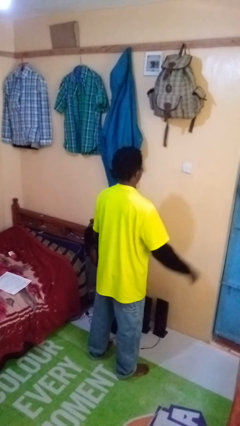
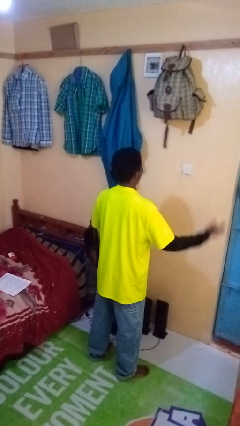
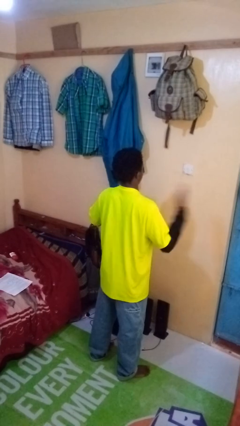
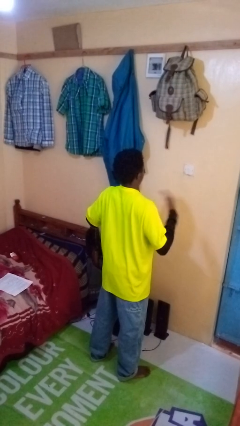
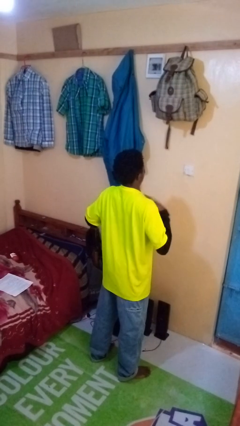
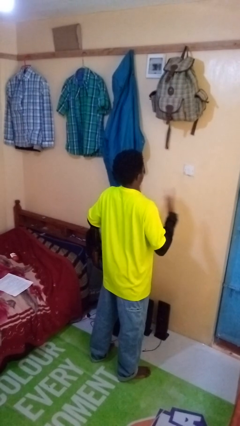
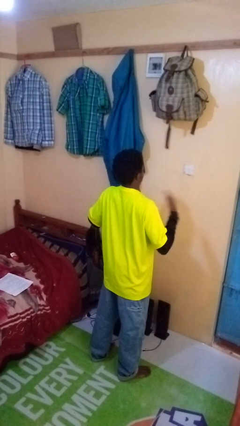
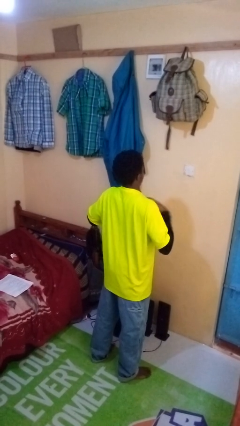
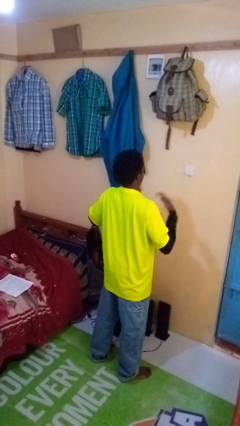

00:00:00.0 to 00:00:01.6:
person drums on chest

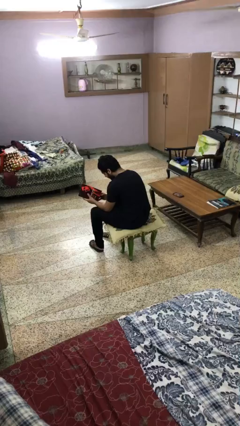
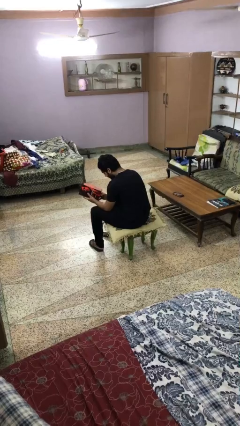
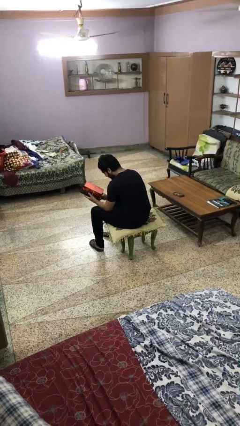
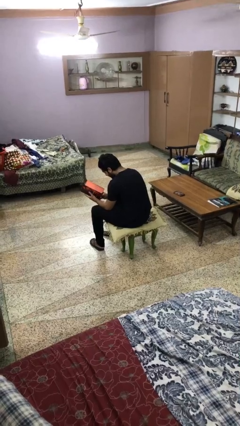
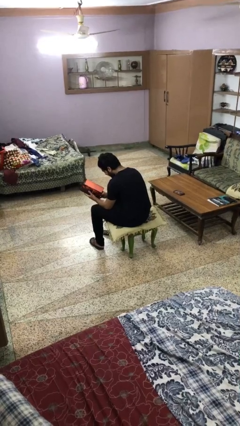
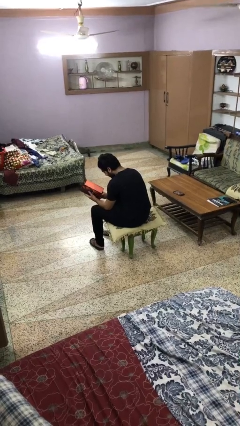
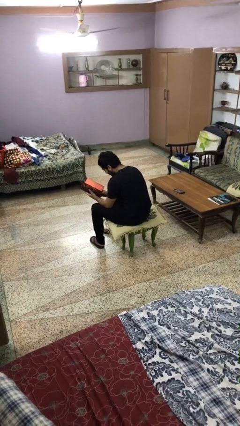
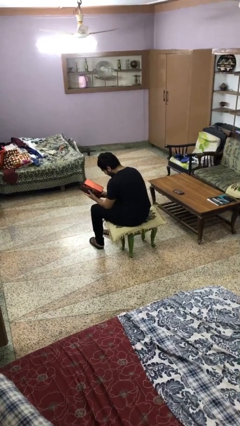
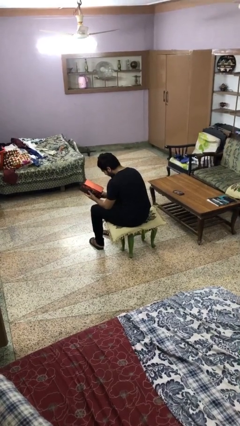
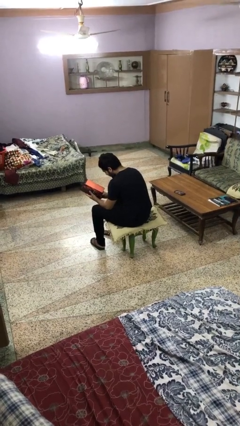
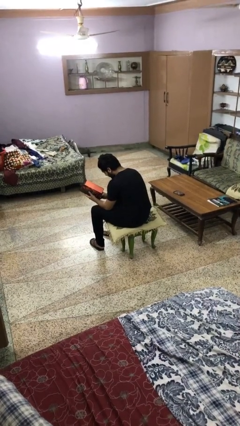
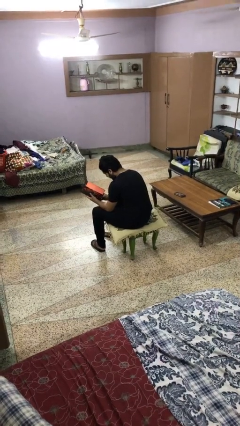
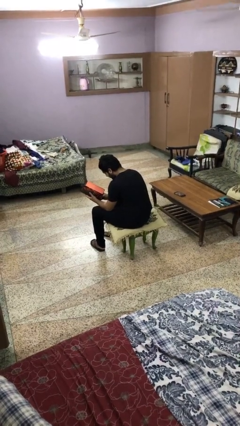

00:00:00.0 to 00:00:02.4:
person reads magazine

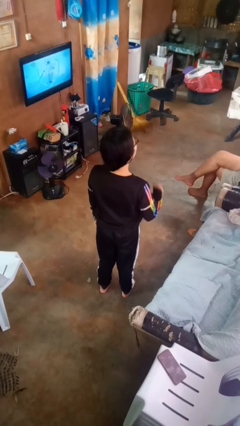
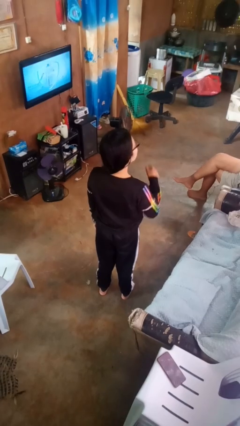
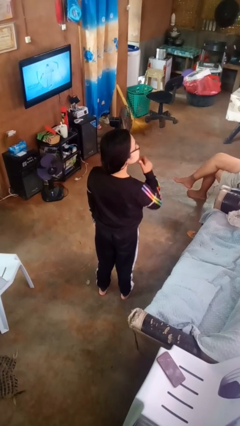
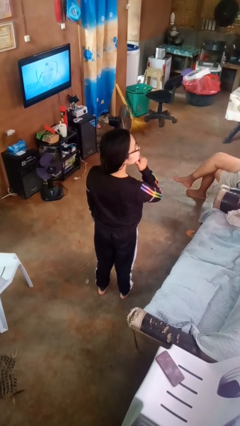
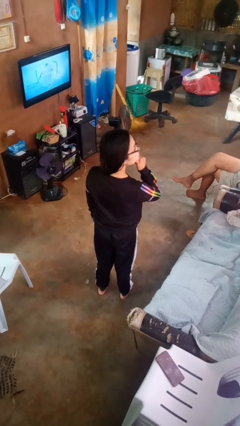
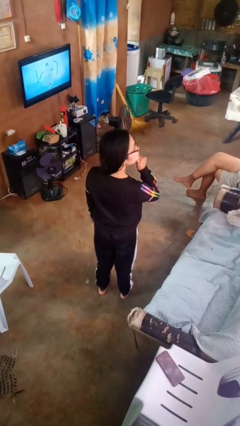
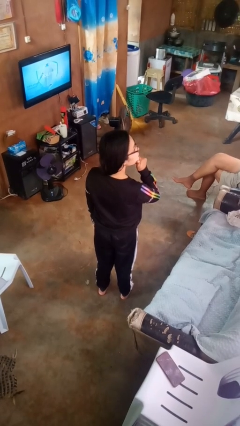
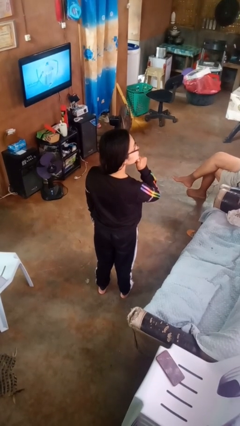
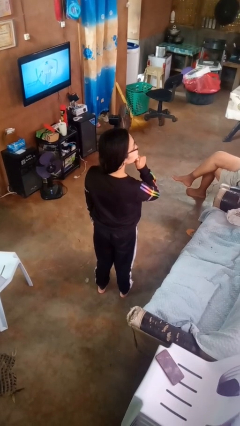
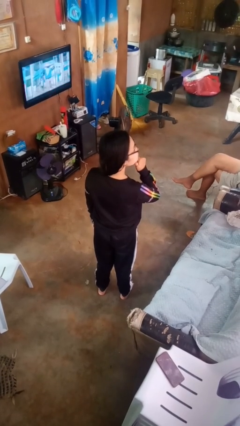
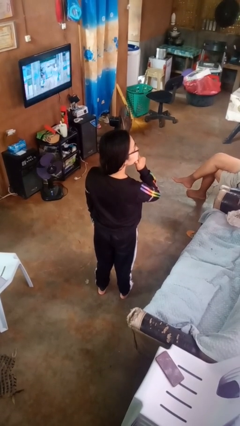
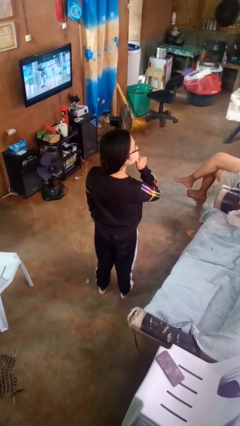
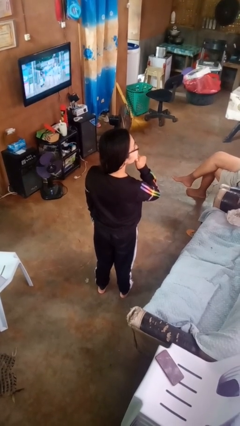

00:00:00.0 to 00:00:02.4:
person strokes chin

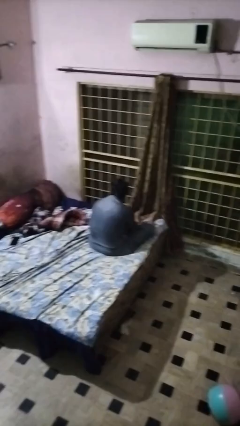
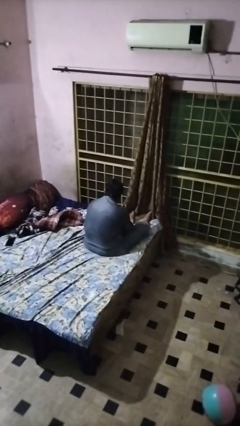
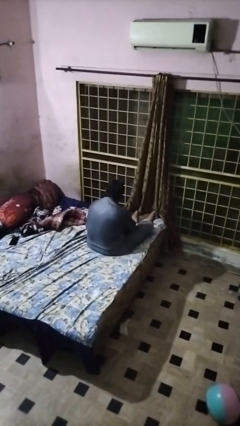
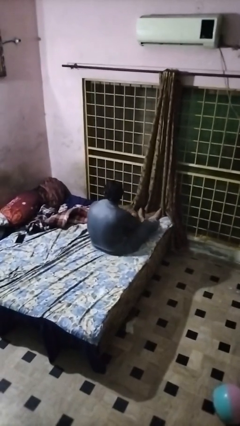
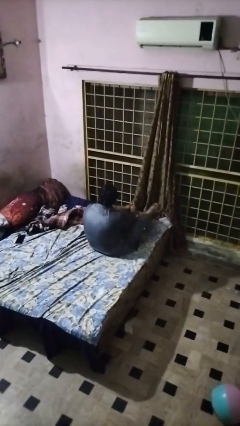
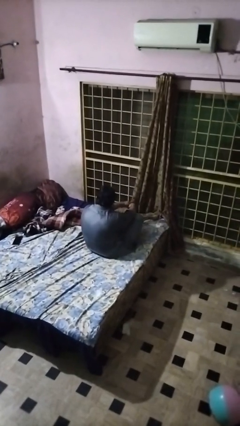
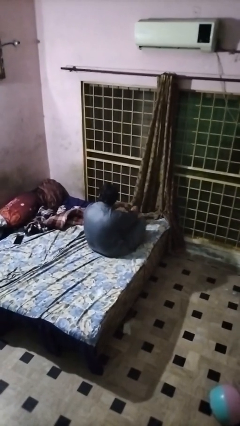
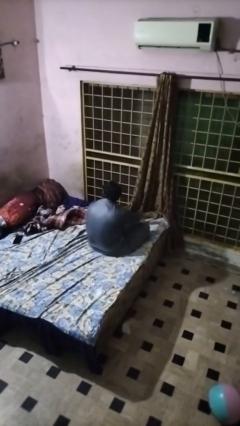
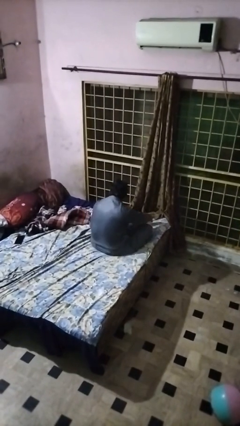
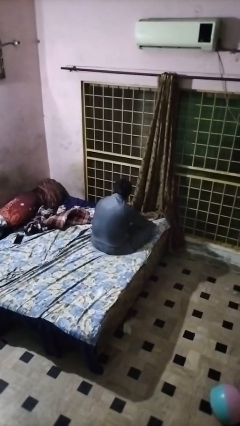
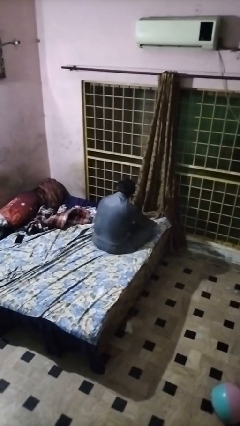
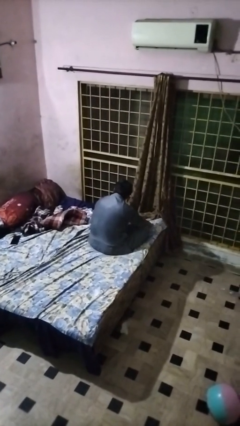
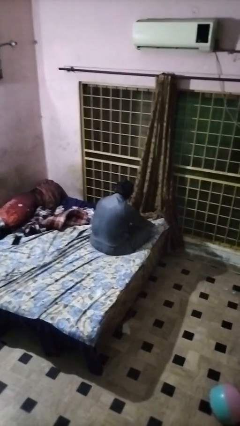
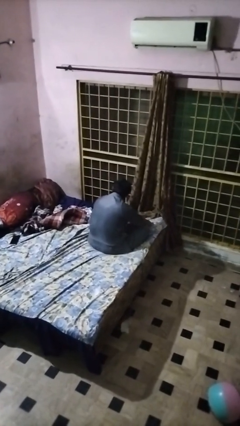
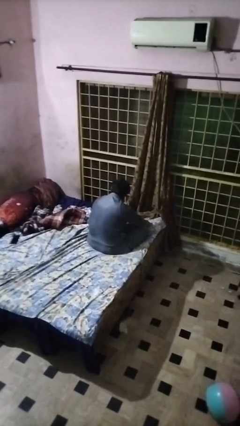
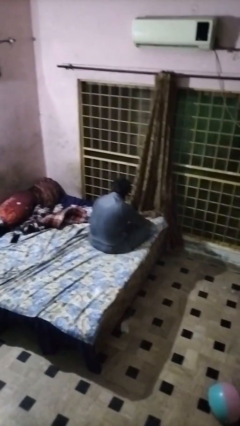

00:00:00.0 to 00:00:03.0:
person crosses legs

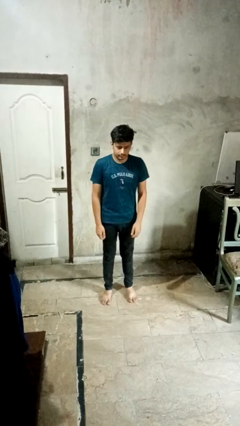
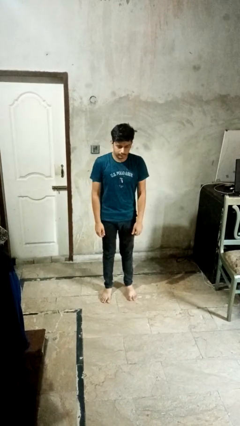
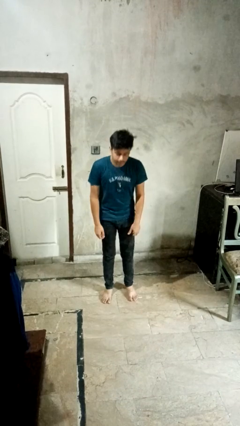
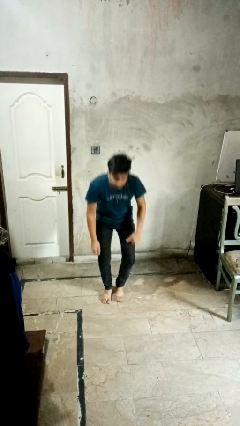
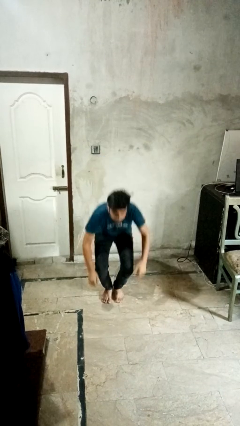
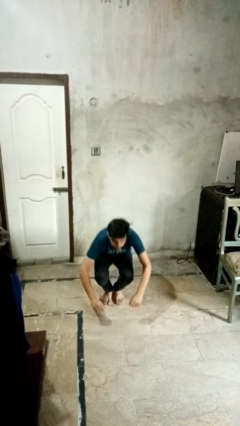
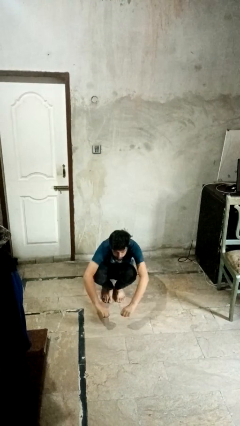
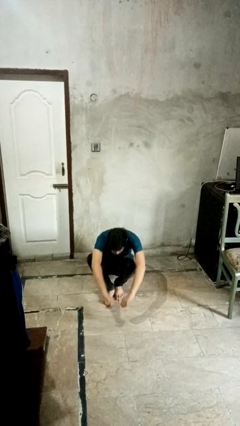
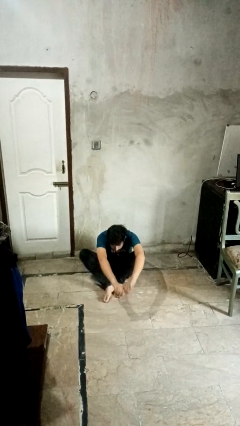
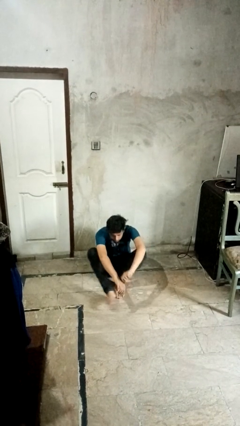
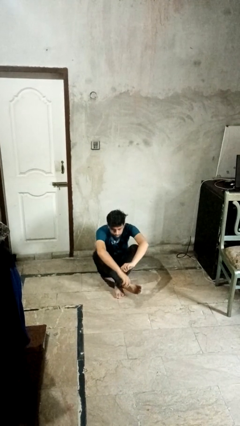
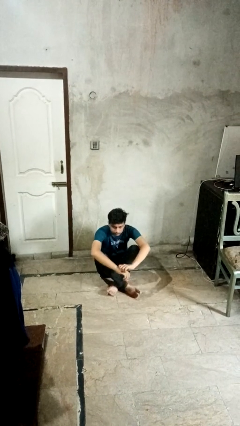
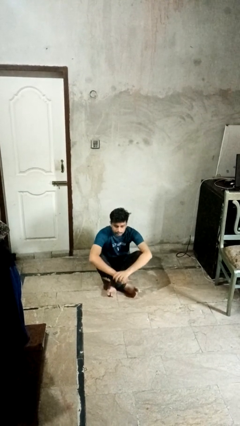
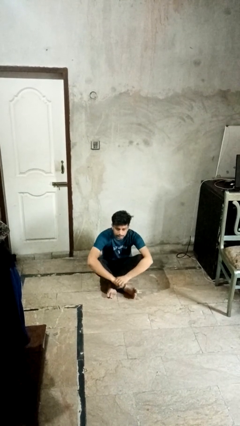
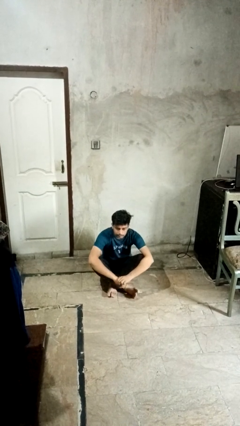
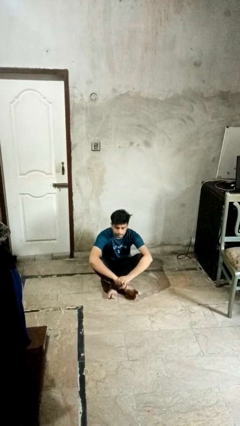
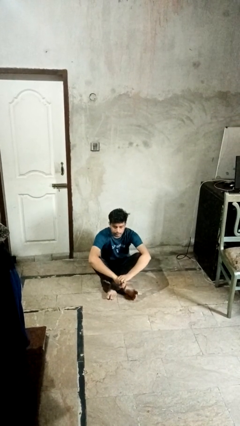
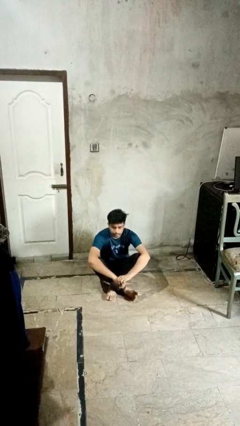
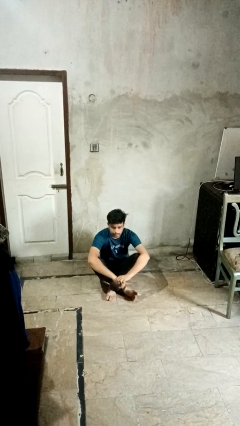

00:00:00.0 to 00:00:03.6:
person sits crisscross

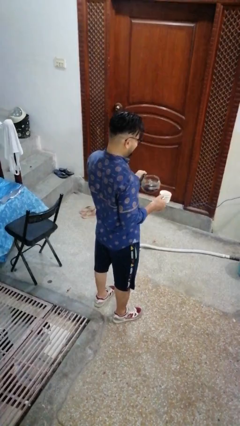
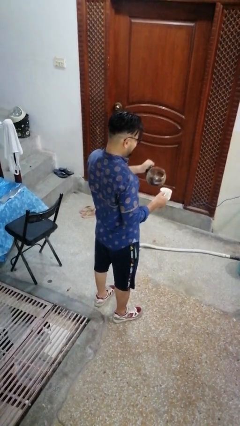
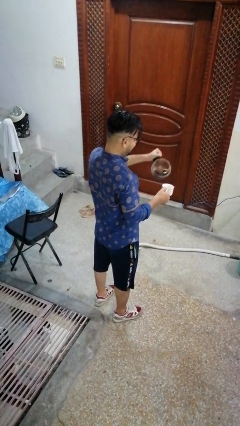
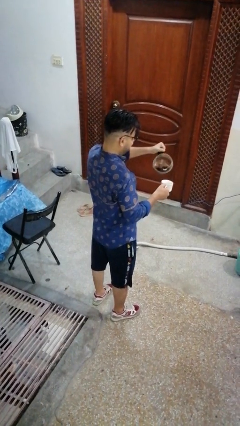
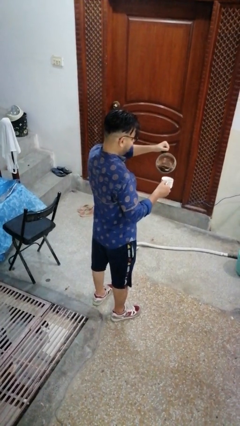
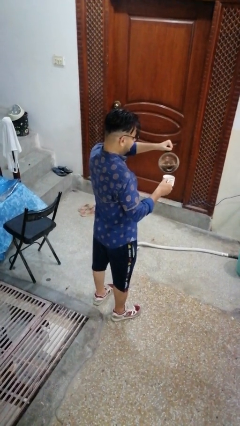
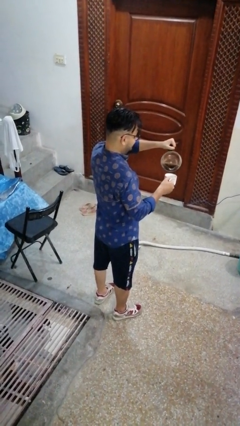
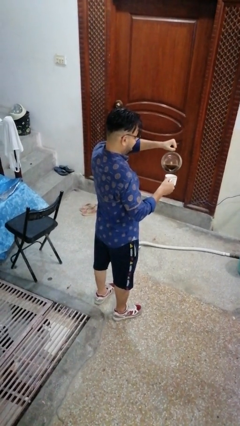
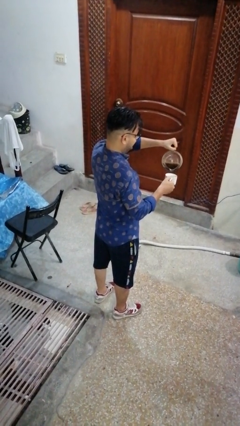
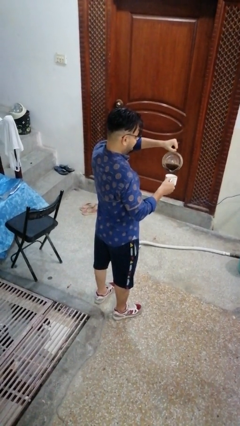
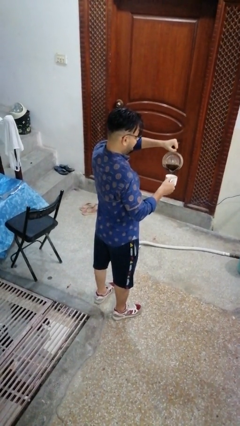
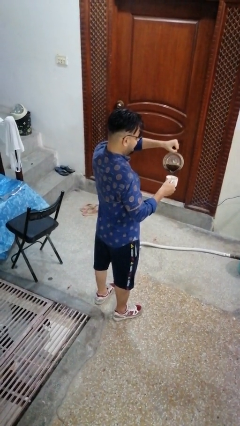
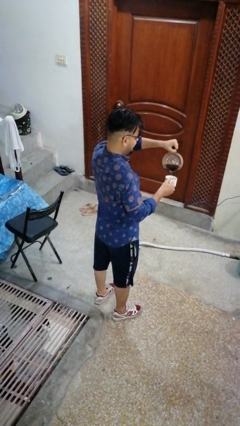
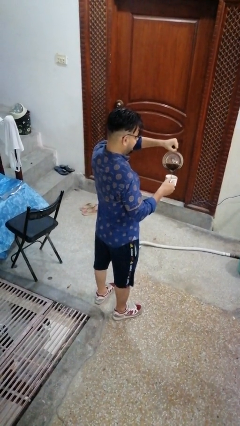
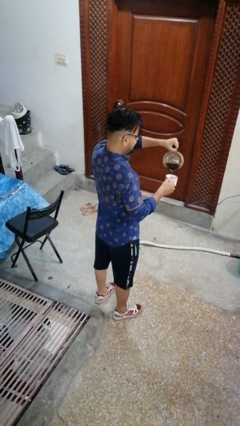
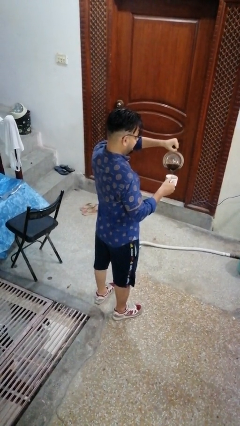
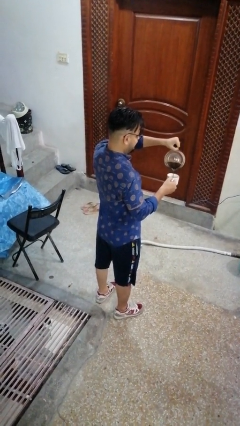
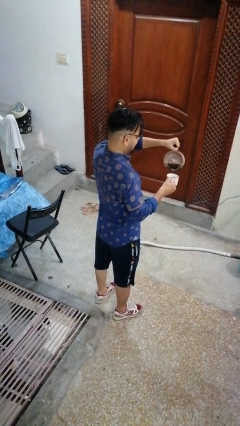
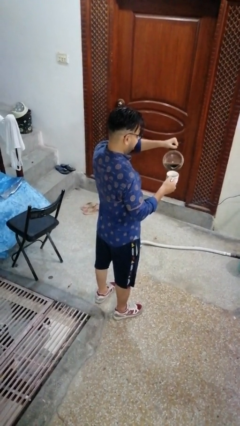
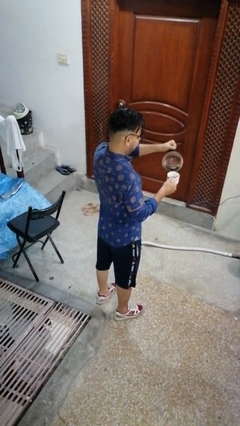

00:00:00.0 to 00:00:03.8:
person pours coffee into mug

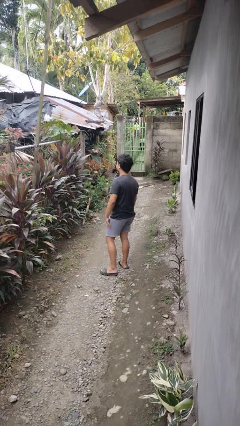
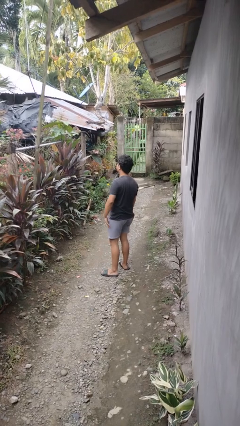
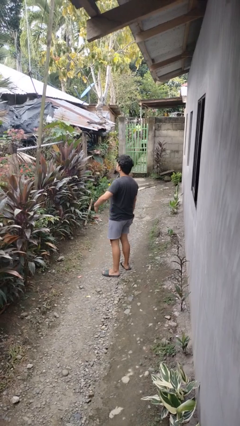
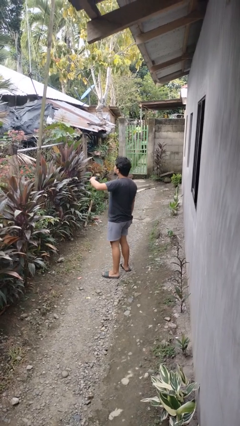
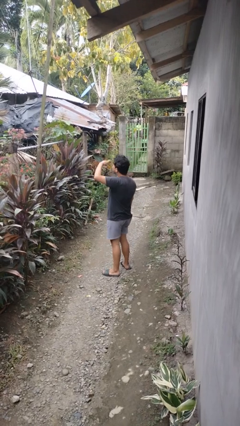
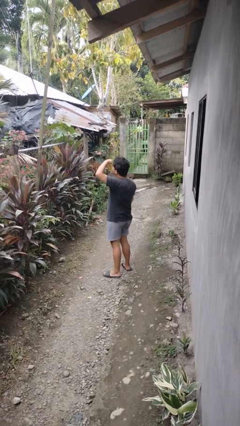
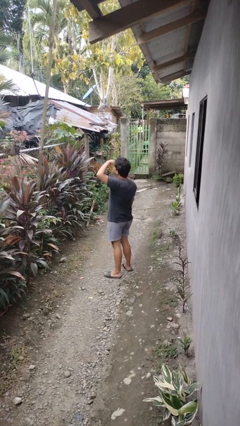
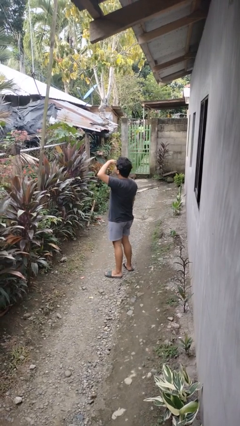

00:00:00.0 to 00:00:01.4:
person shades eyes
